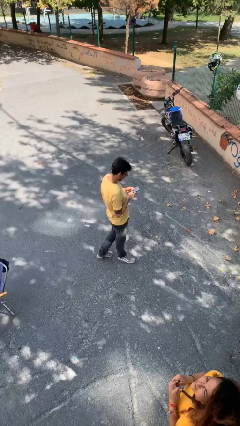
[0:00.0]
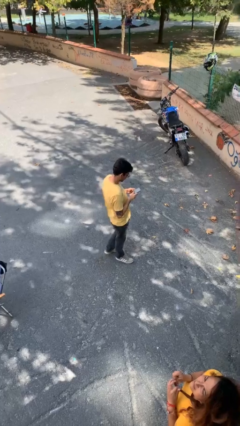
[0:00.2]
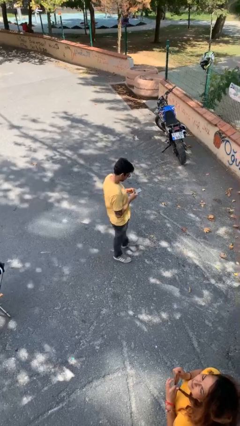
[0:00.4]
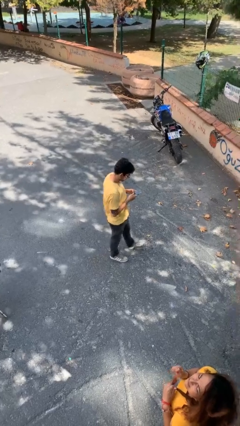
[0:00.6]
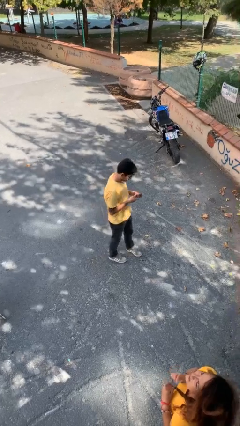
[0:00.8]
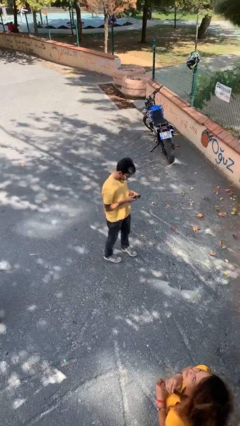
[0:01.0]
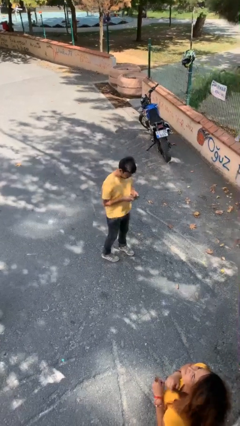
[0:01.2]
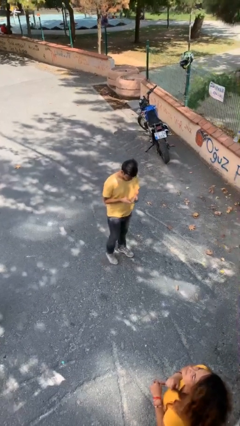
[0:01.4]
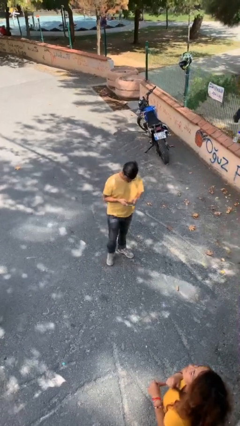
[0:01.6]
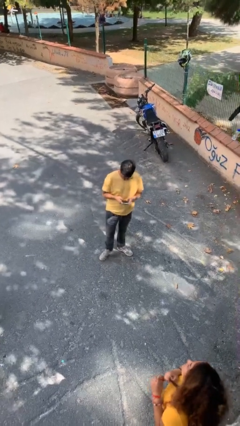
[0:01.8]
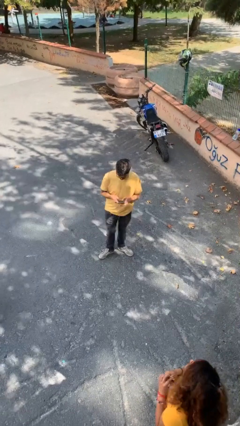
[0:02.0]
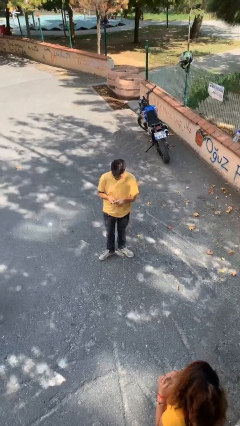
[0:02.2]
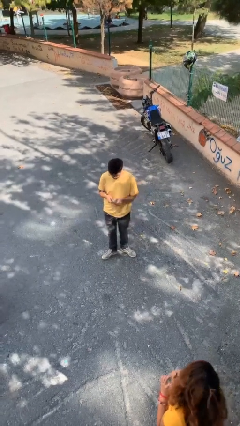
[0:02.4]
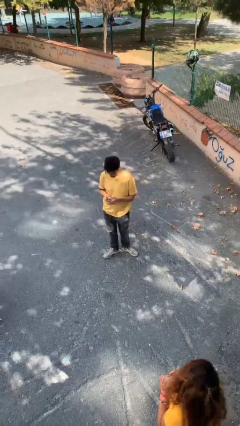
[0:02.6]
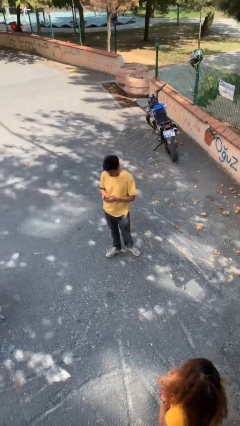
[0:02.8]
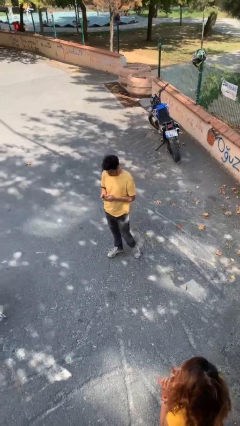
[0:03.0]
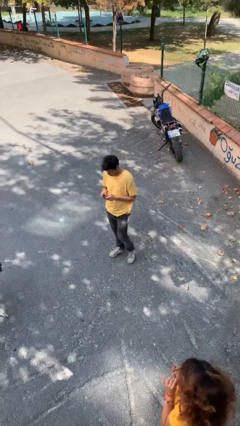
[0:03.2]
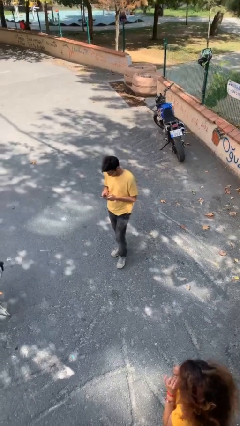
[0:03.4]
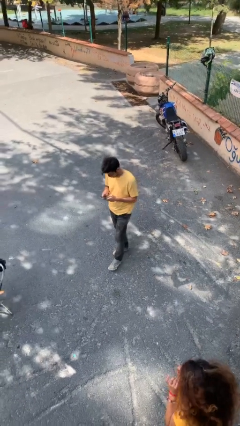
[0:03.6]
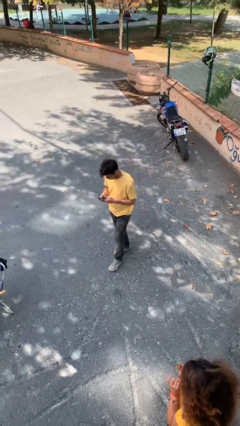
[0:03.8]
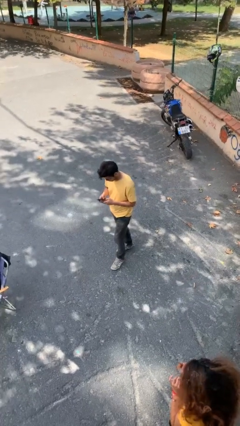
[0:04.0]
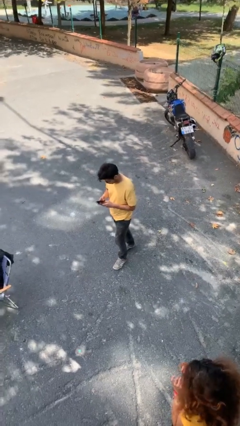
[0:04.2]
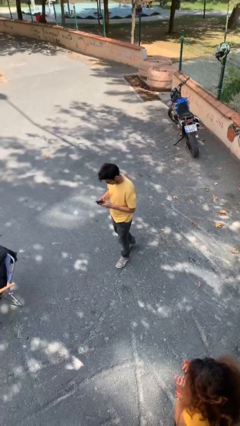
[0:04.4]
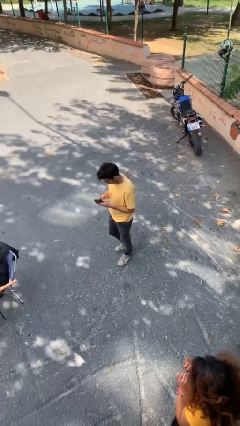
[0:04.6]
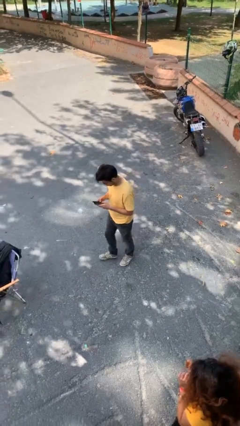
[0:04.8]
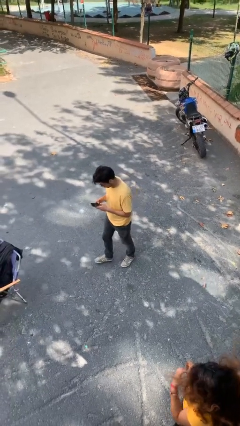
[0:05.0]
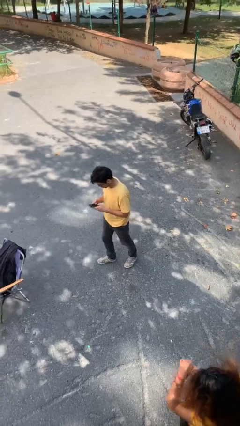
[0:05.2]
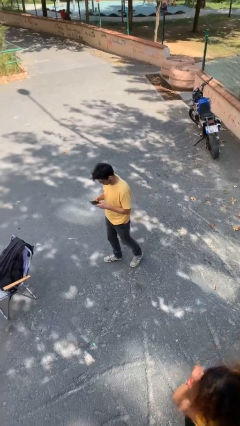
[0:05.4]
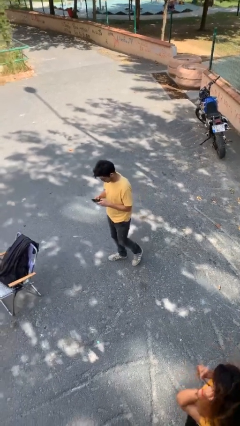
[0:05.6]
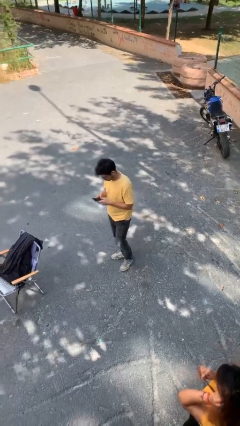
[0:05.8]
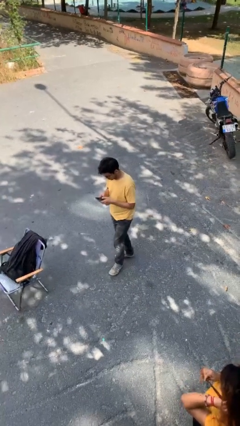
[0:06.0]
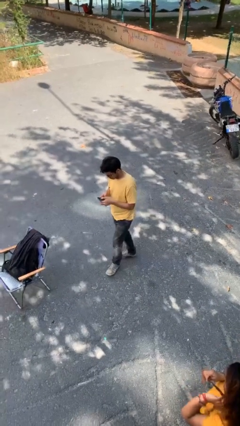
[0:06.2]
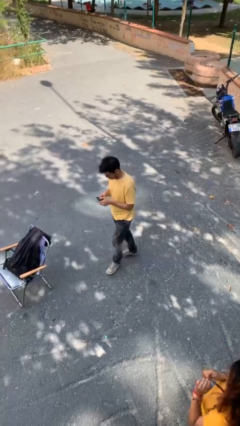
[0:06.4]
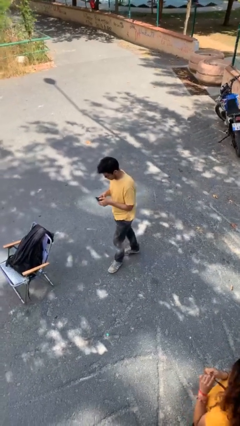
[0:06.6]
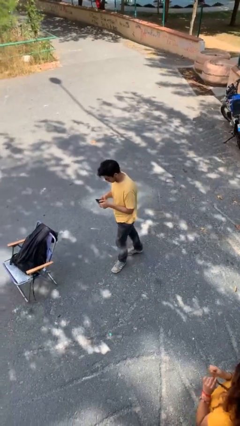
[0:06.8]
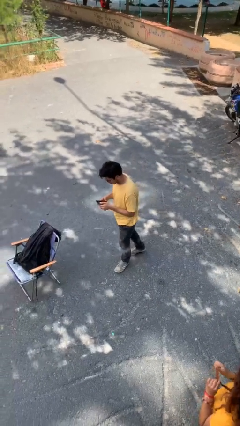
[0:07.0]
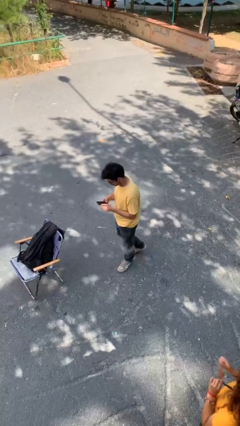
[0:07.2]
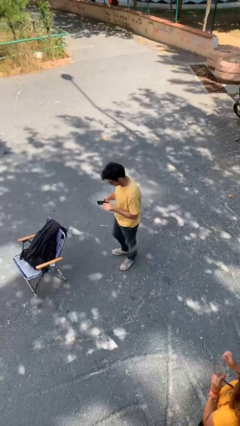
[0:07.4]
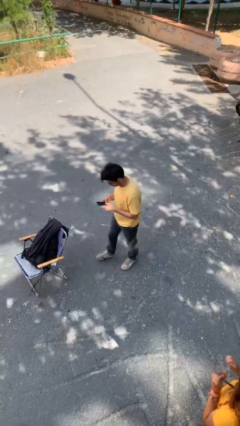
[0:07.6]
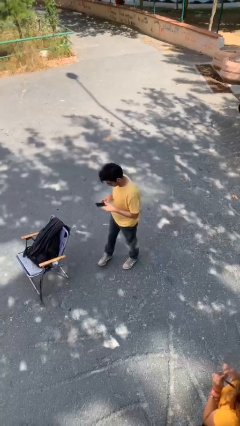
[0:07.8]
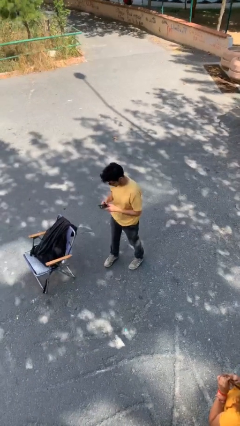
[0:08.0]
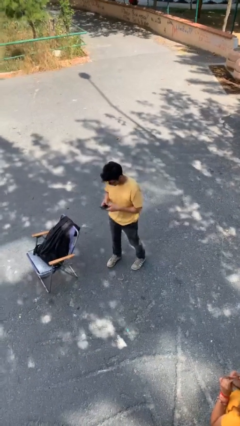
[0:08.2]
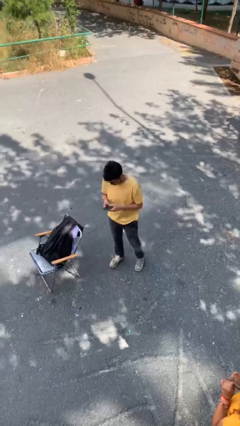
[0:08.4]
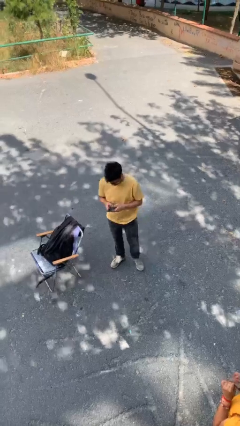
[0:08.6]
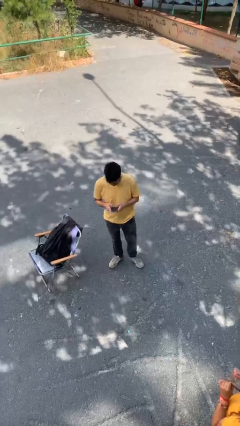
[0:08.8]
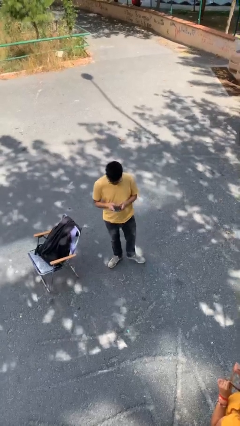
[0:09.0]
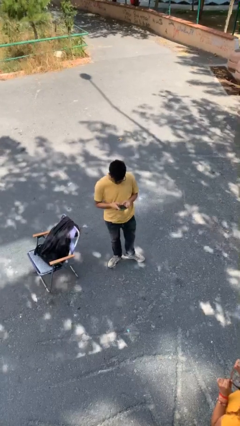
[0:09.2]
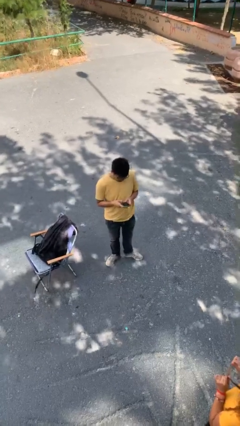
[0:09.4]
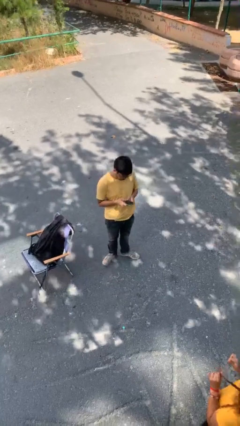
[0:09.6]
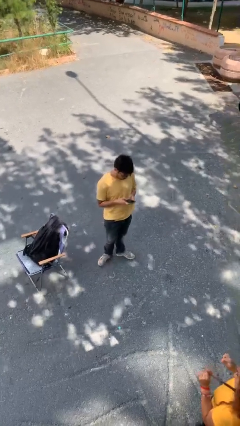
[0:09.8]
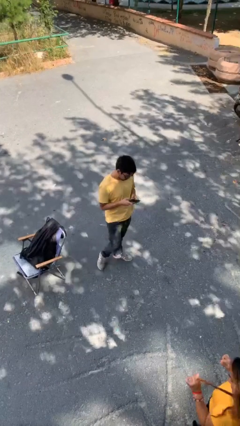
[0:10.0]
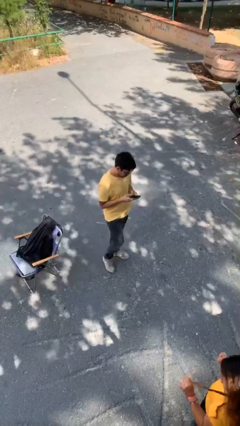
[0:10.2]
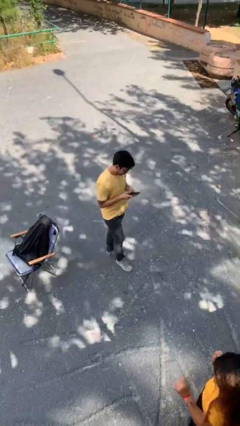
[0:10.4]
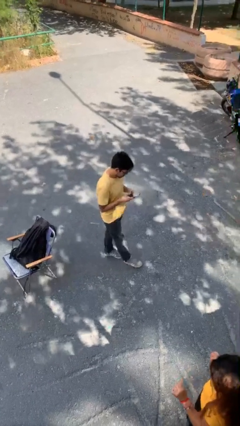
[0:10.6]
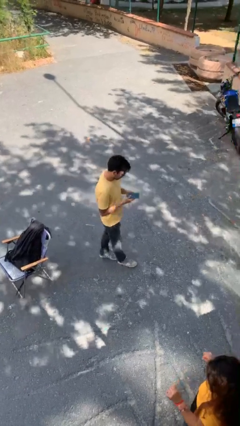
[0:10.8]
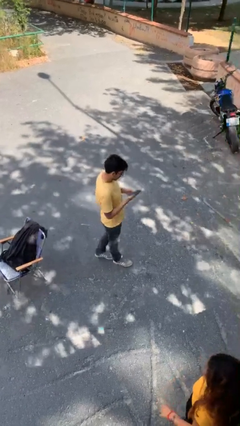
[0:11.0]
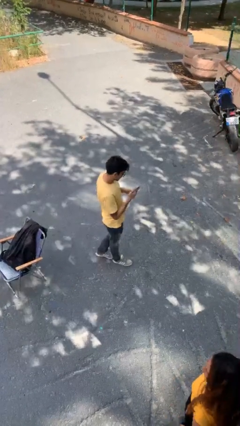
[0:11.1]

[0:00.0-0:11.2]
person texts on phone

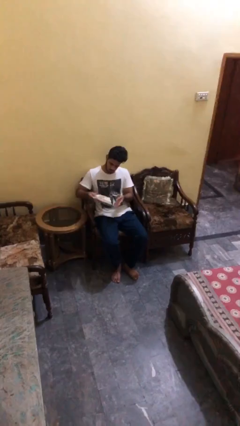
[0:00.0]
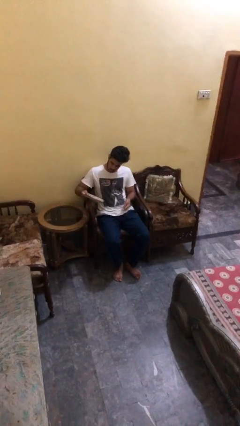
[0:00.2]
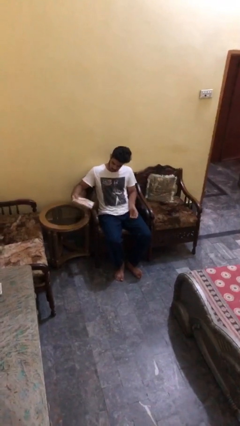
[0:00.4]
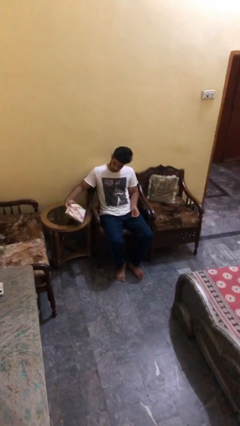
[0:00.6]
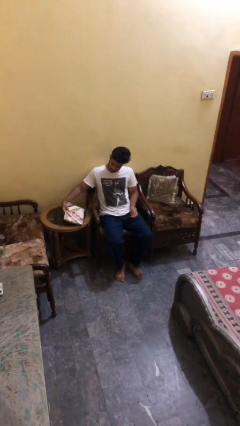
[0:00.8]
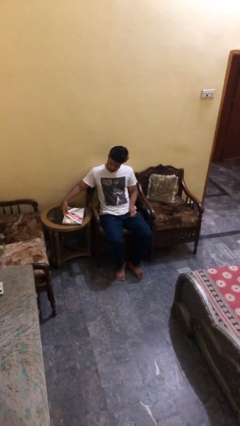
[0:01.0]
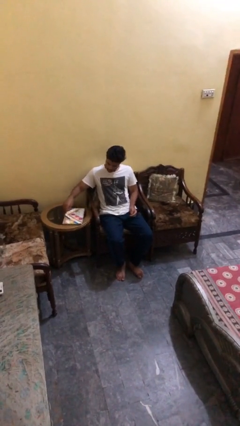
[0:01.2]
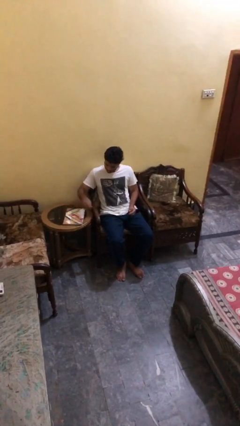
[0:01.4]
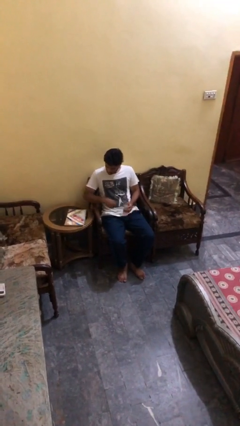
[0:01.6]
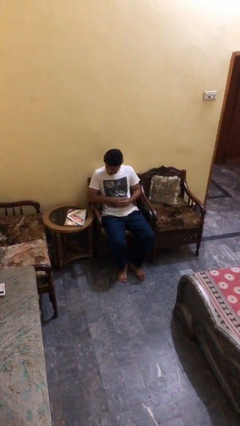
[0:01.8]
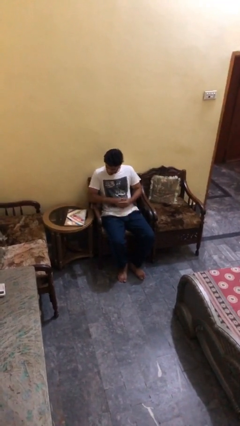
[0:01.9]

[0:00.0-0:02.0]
person puts down object on table

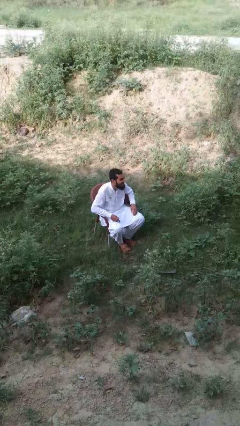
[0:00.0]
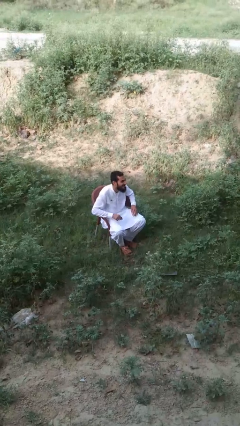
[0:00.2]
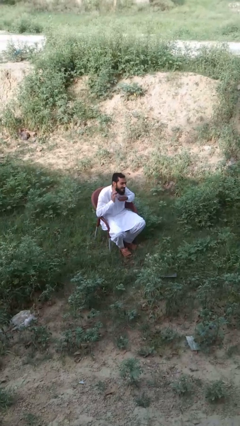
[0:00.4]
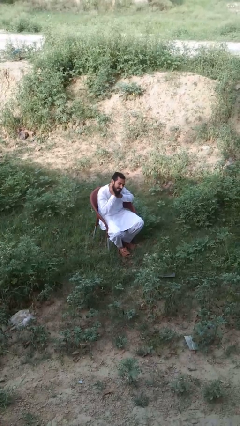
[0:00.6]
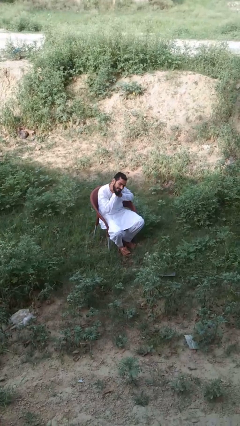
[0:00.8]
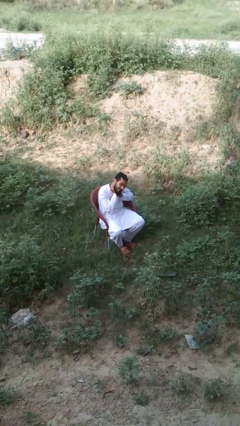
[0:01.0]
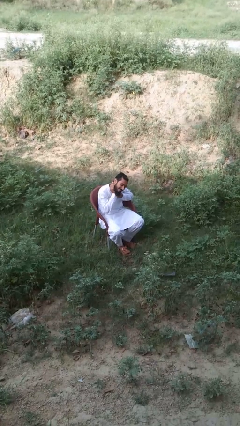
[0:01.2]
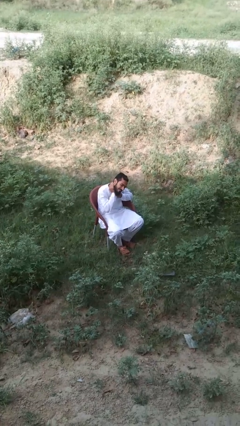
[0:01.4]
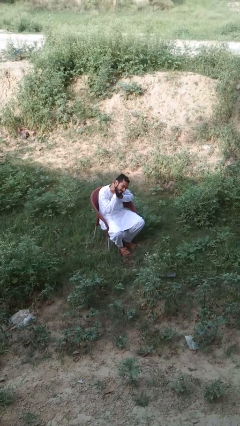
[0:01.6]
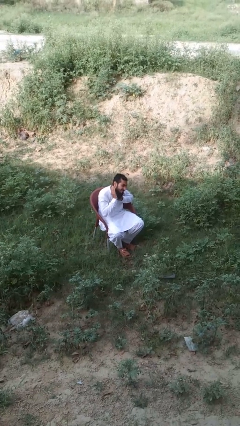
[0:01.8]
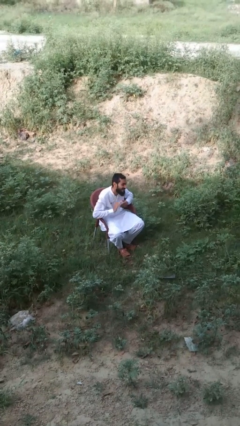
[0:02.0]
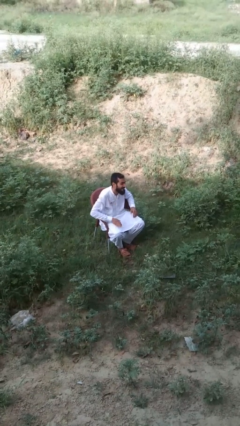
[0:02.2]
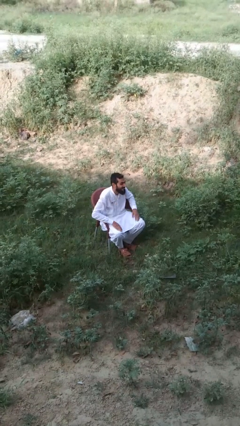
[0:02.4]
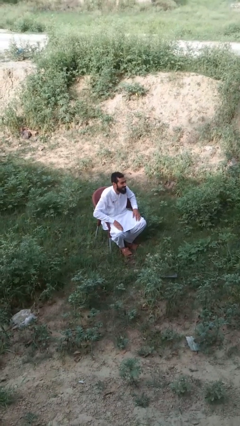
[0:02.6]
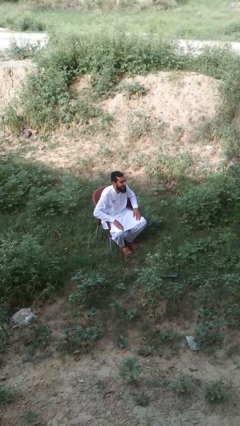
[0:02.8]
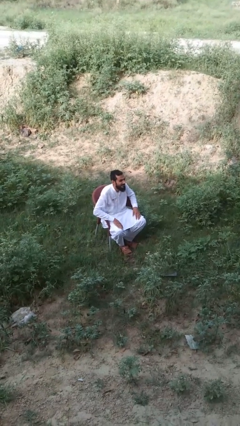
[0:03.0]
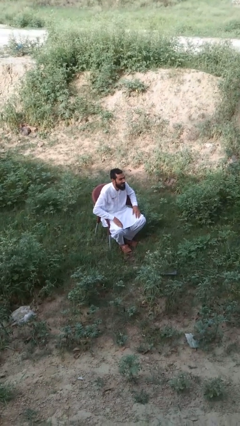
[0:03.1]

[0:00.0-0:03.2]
person rubs neck

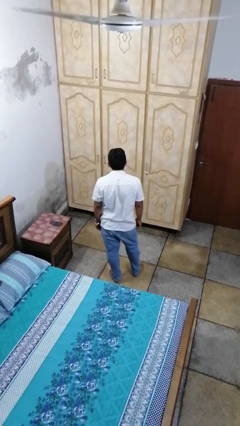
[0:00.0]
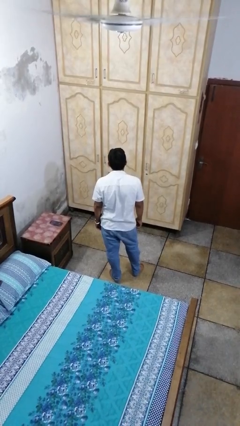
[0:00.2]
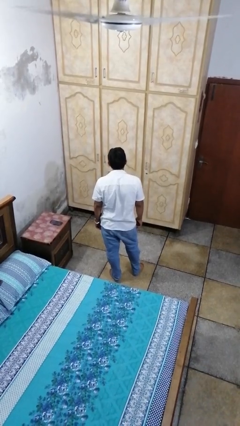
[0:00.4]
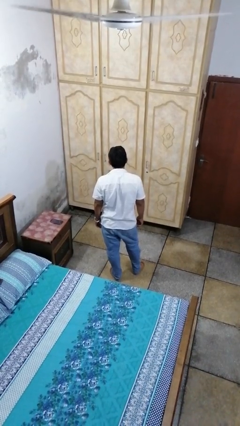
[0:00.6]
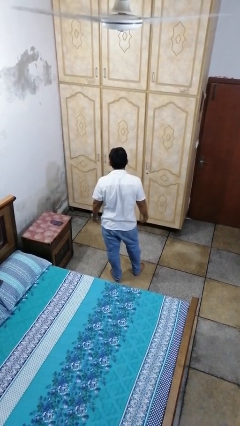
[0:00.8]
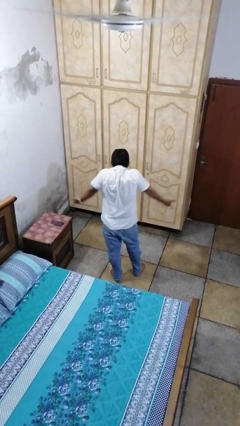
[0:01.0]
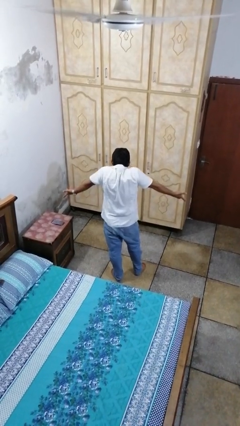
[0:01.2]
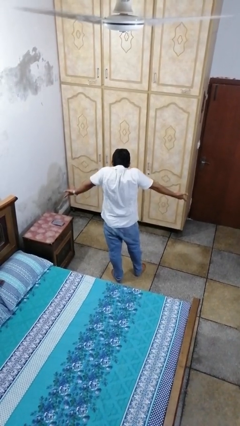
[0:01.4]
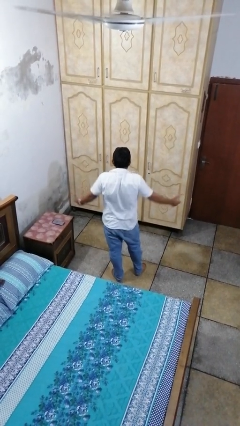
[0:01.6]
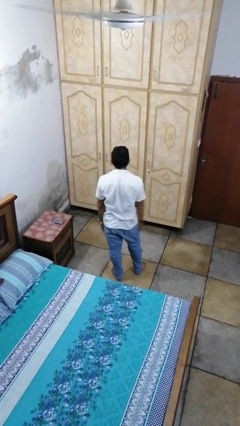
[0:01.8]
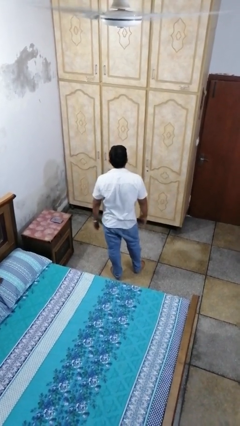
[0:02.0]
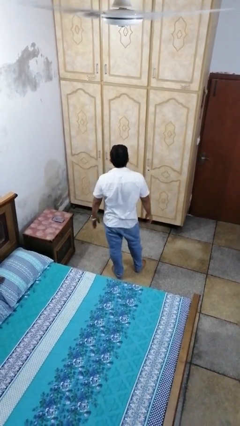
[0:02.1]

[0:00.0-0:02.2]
person shrugs
